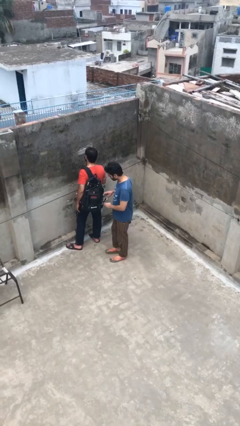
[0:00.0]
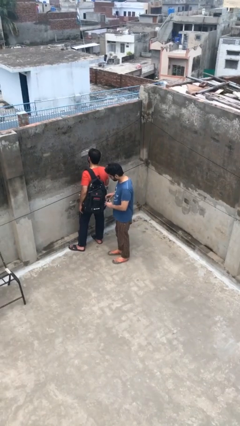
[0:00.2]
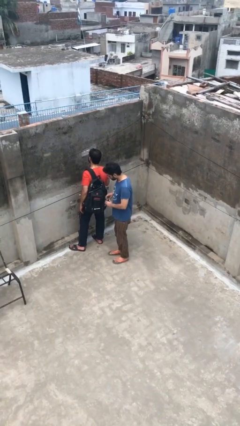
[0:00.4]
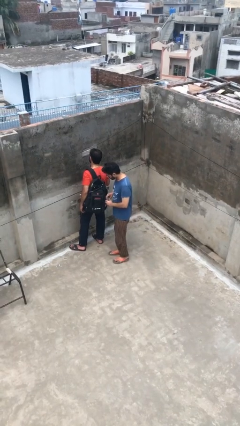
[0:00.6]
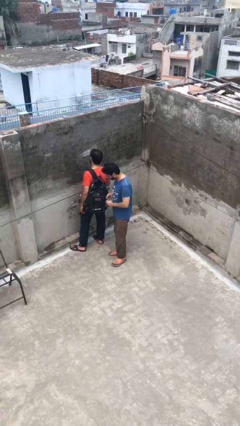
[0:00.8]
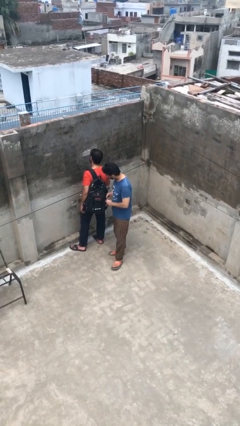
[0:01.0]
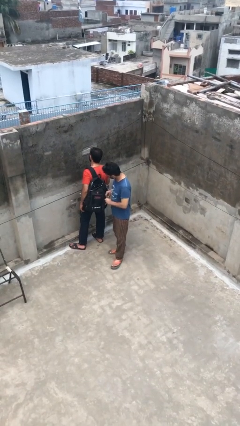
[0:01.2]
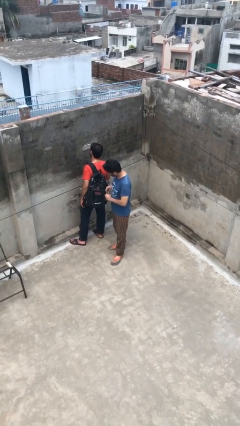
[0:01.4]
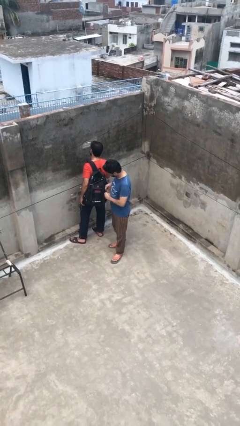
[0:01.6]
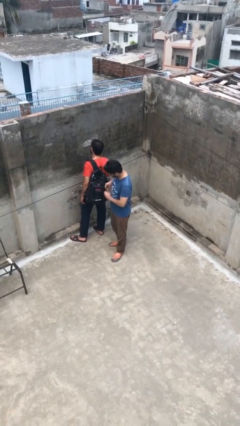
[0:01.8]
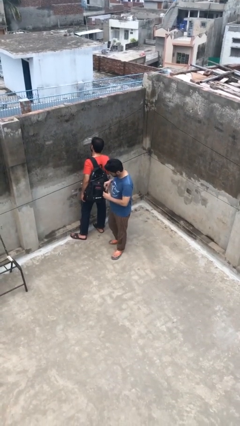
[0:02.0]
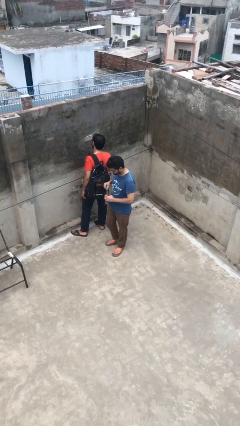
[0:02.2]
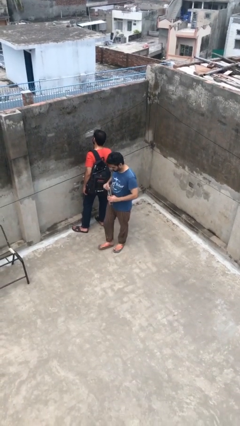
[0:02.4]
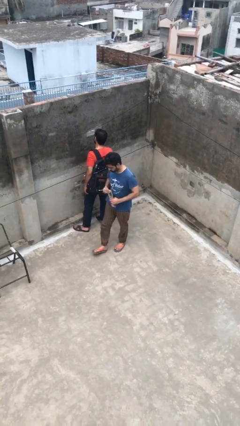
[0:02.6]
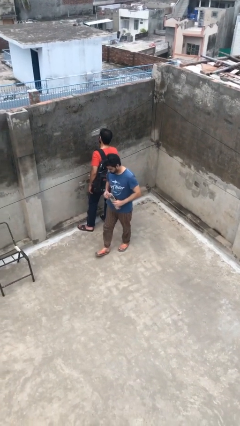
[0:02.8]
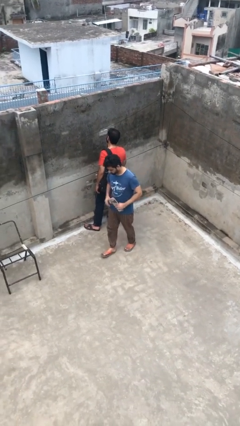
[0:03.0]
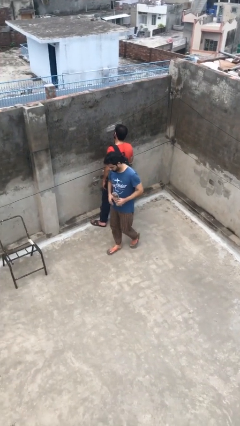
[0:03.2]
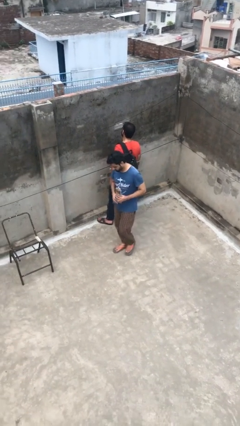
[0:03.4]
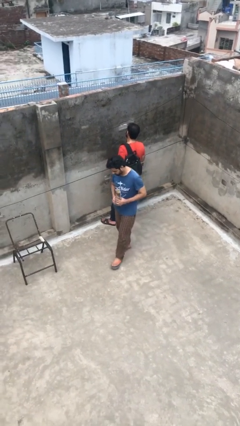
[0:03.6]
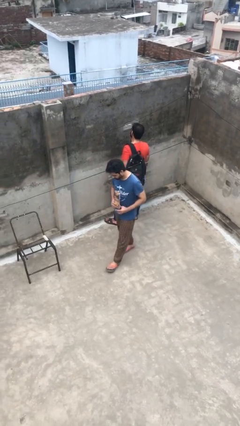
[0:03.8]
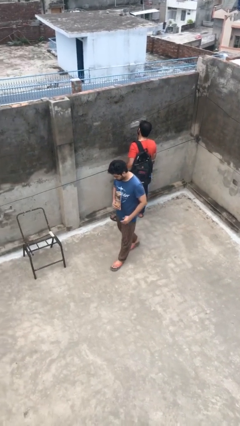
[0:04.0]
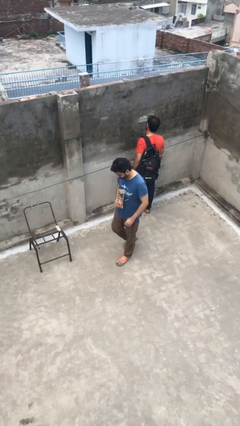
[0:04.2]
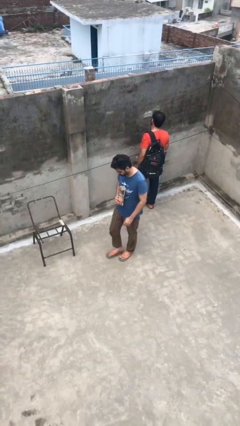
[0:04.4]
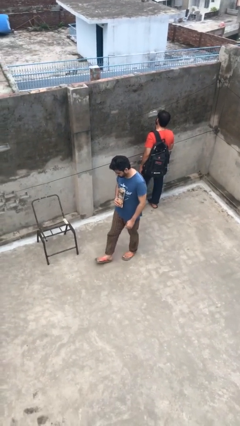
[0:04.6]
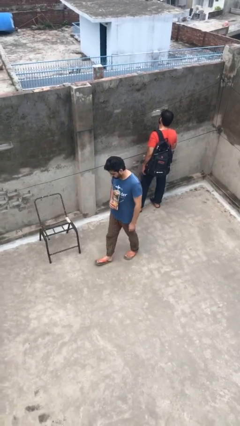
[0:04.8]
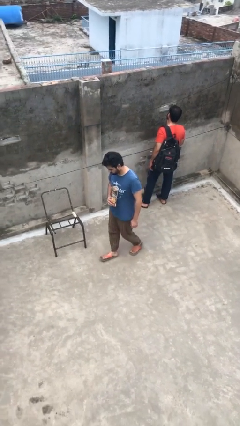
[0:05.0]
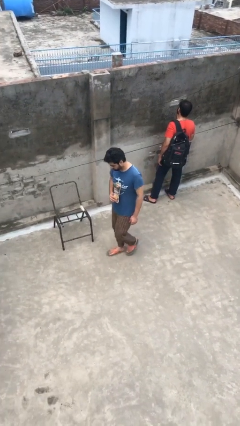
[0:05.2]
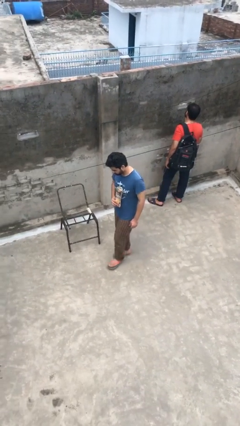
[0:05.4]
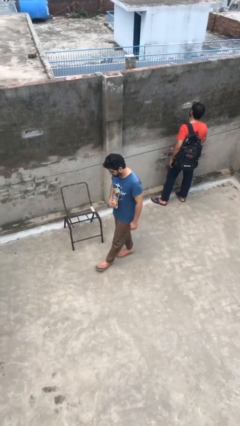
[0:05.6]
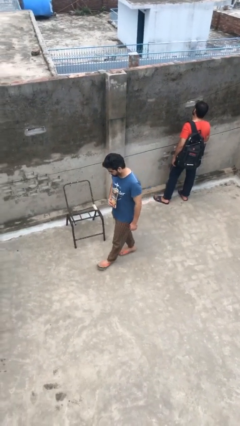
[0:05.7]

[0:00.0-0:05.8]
person steals object from person

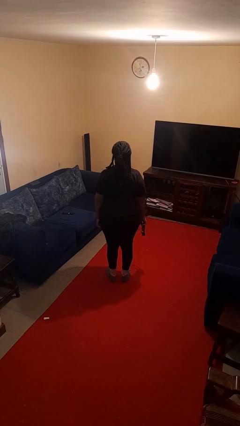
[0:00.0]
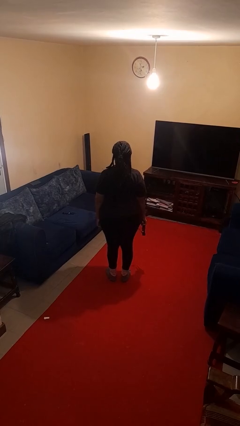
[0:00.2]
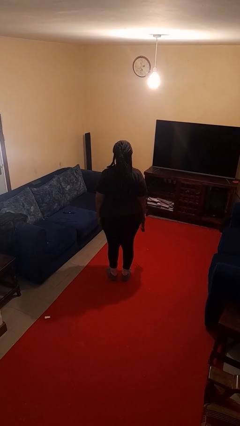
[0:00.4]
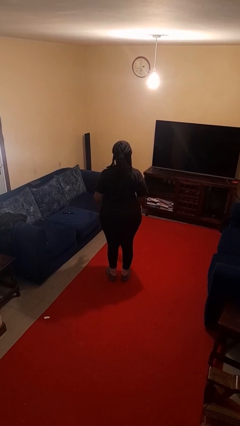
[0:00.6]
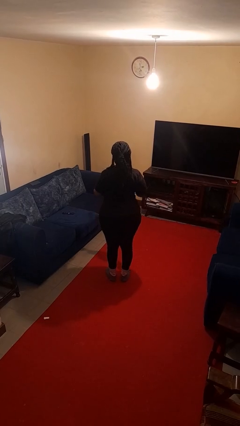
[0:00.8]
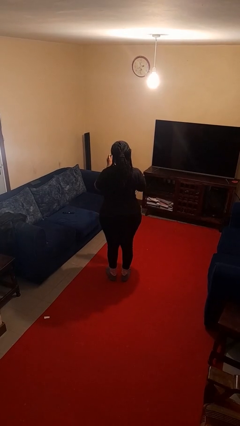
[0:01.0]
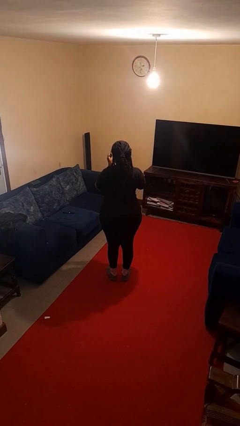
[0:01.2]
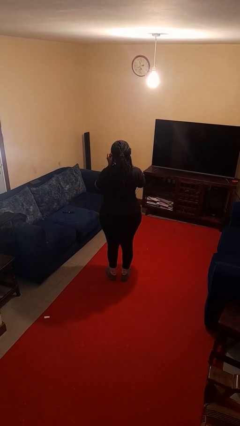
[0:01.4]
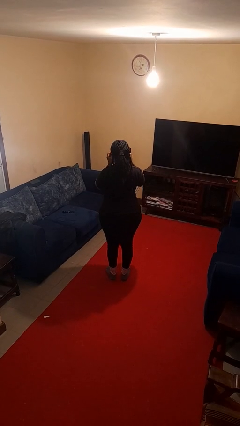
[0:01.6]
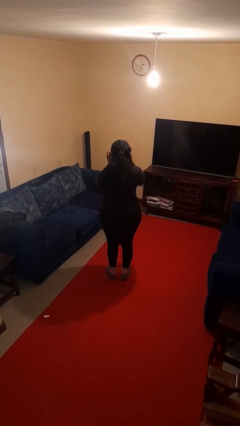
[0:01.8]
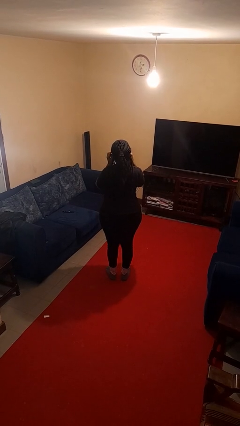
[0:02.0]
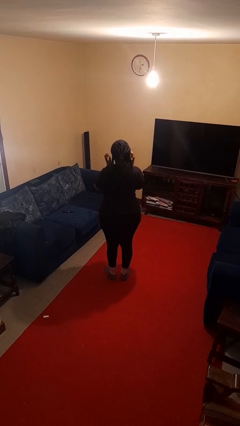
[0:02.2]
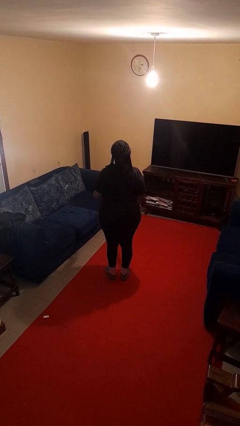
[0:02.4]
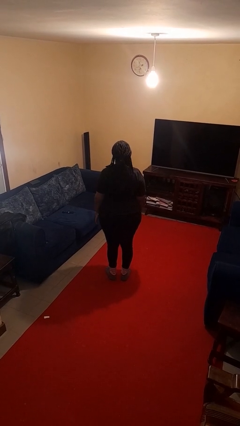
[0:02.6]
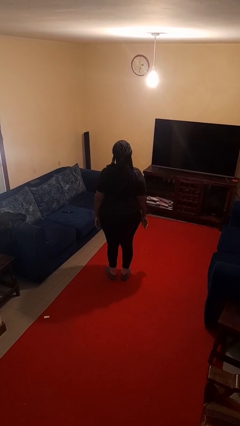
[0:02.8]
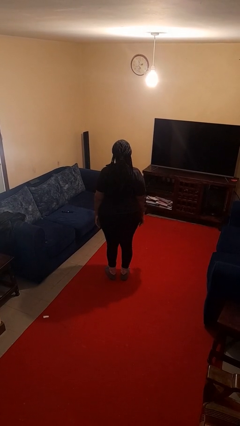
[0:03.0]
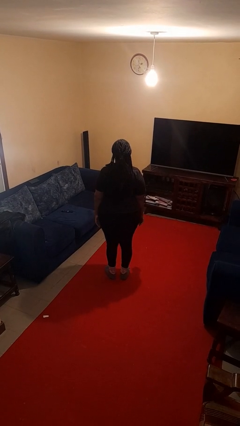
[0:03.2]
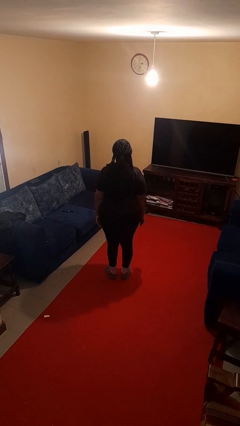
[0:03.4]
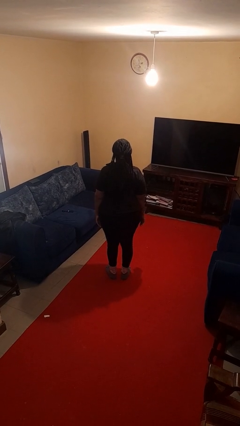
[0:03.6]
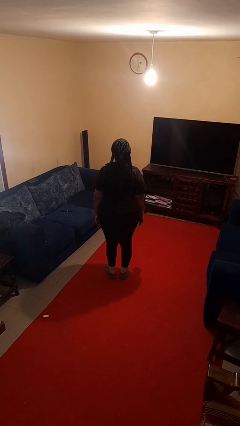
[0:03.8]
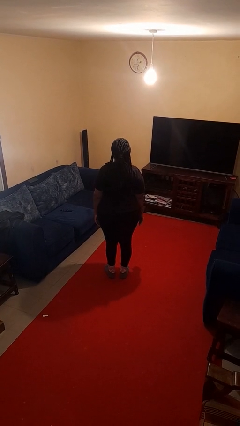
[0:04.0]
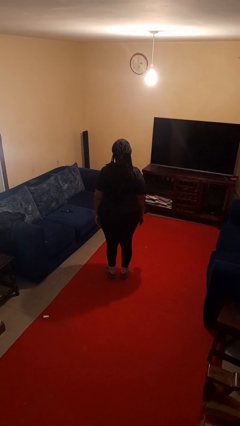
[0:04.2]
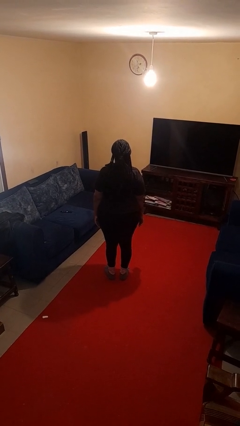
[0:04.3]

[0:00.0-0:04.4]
person puts on sunglasses

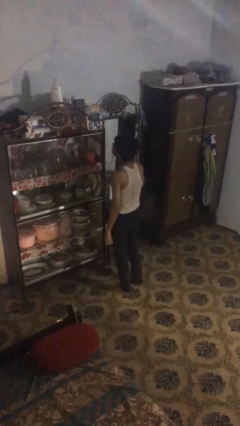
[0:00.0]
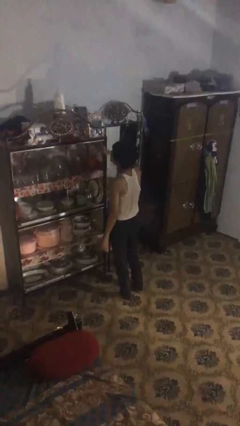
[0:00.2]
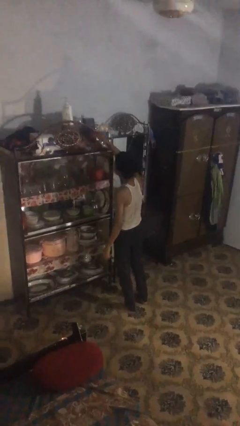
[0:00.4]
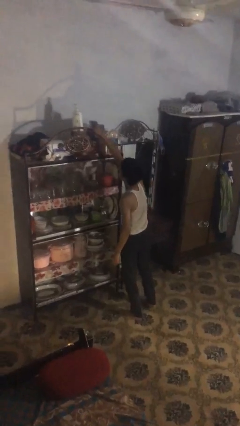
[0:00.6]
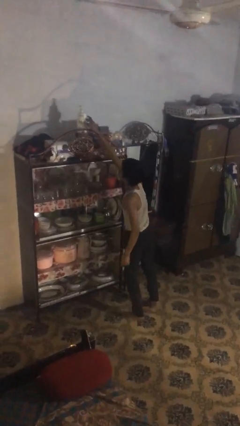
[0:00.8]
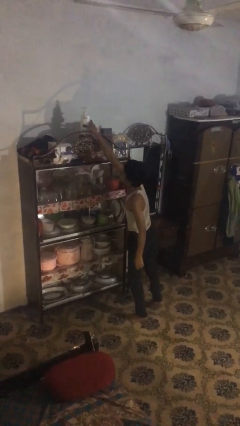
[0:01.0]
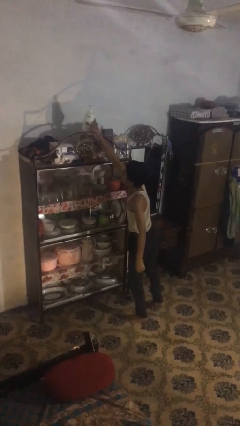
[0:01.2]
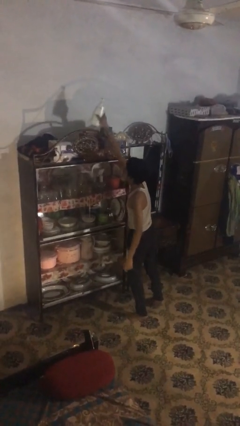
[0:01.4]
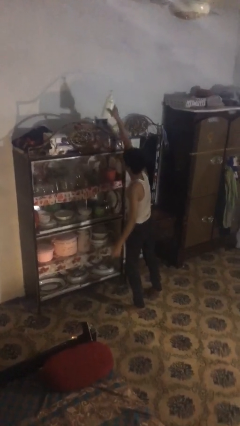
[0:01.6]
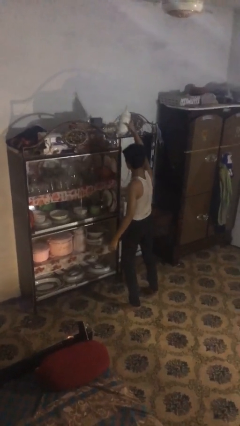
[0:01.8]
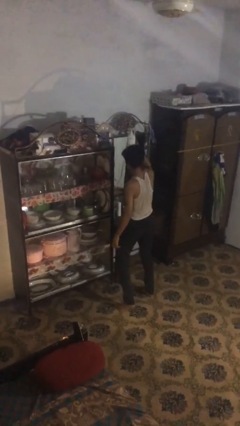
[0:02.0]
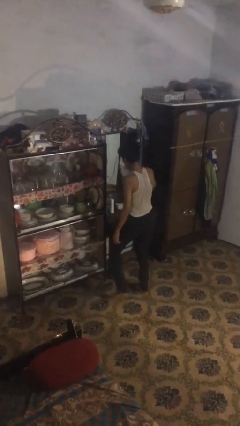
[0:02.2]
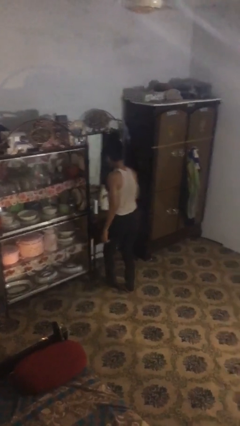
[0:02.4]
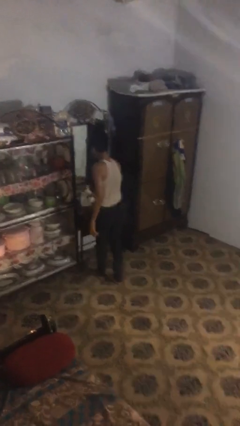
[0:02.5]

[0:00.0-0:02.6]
person picks up object from shelf

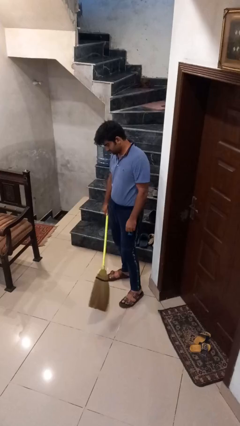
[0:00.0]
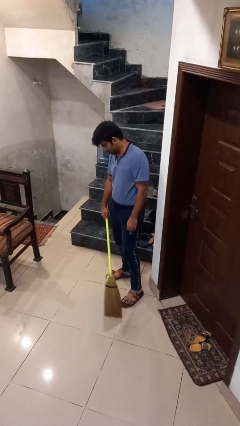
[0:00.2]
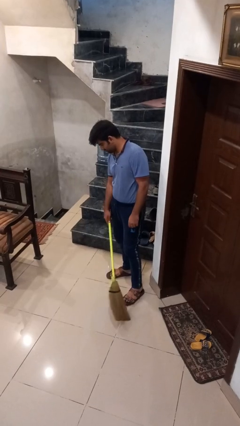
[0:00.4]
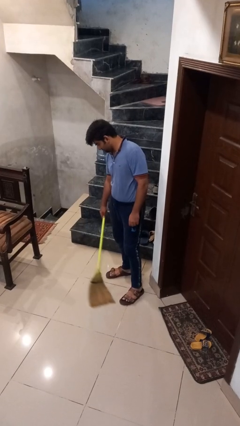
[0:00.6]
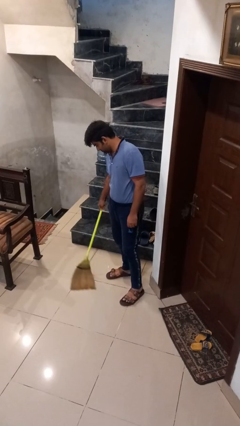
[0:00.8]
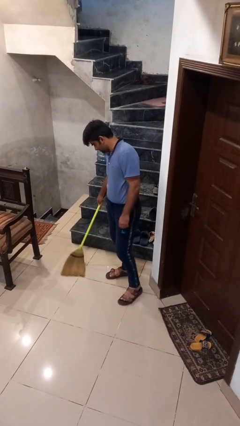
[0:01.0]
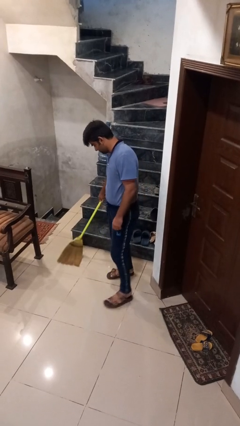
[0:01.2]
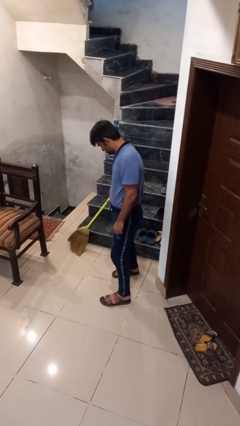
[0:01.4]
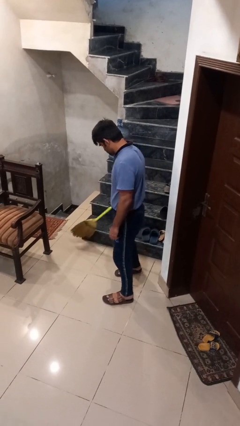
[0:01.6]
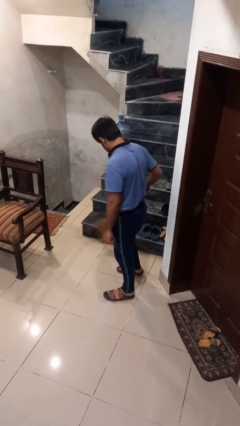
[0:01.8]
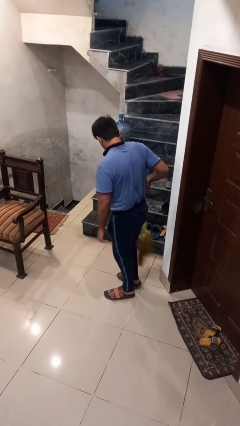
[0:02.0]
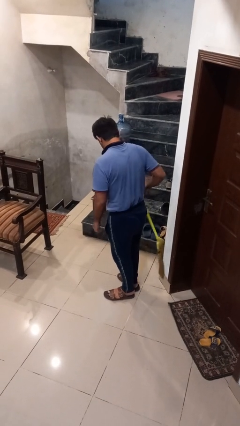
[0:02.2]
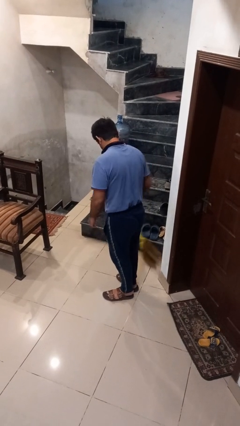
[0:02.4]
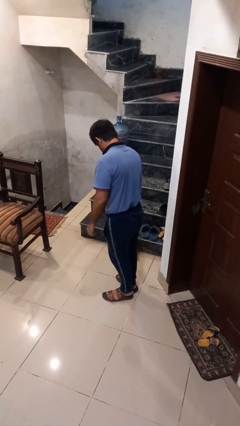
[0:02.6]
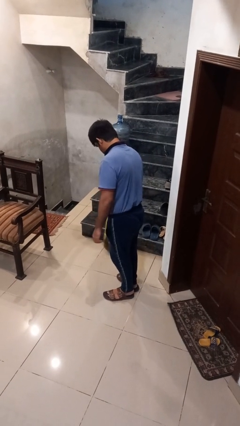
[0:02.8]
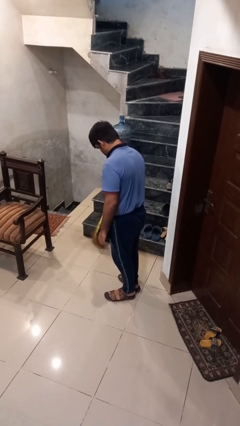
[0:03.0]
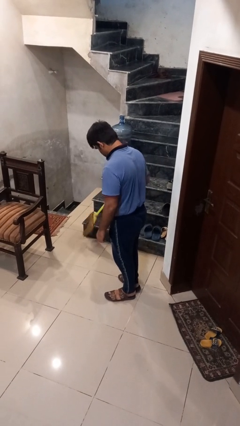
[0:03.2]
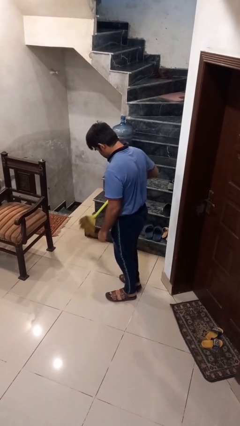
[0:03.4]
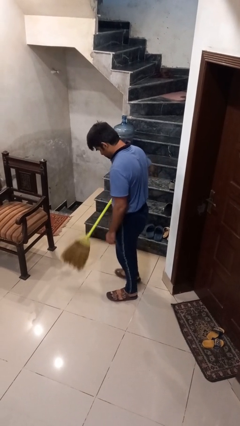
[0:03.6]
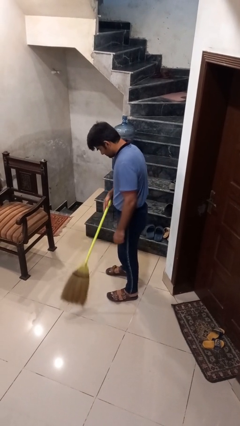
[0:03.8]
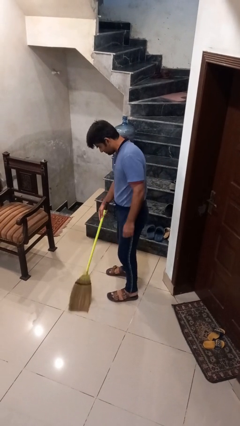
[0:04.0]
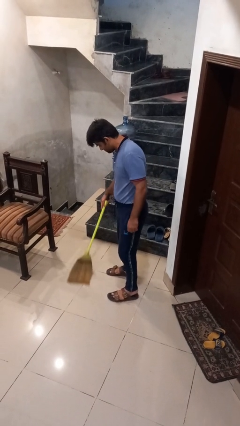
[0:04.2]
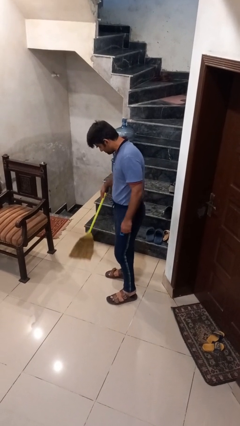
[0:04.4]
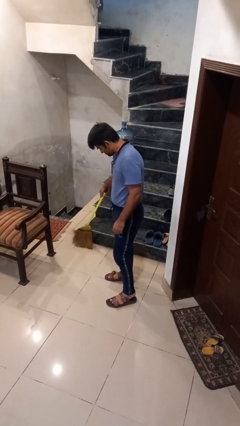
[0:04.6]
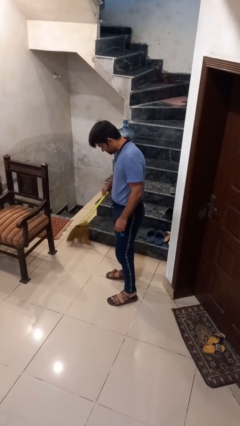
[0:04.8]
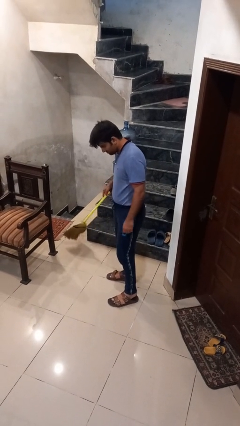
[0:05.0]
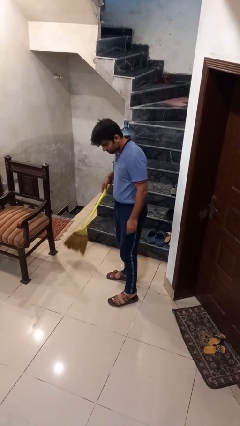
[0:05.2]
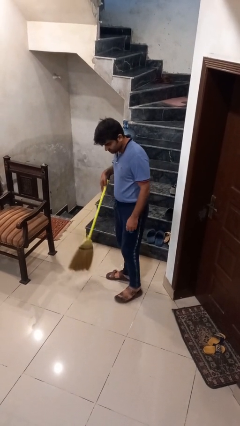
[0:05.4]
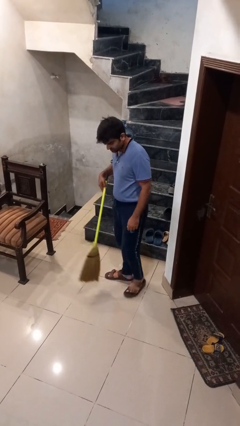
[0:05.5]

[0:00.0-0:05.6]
person sweeps floor
